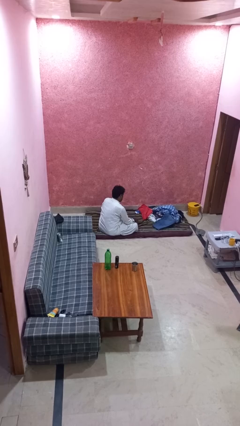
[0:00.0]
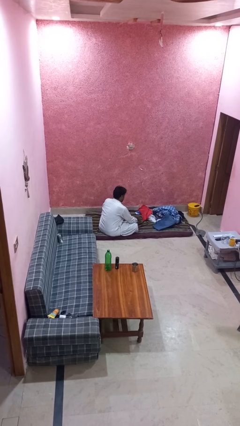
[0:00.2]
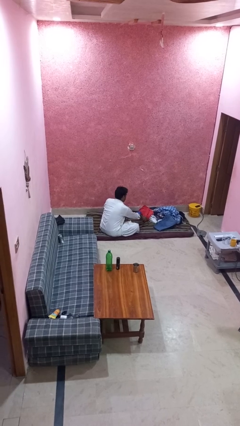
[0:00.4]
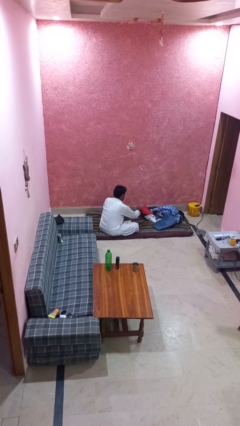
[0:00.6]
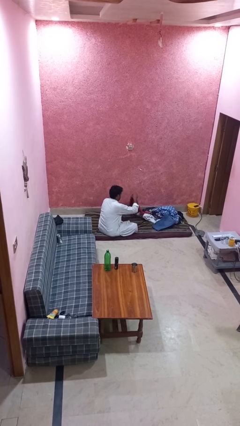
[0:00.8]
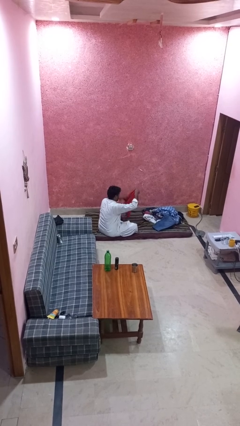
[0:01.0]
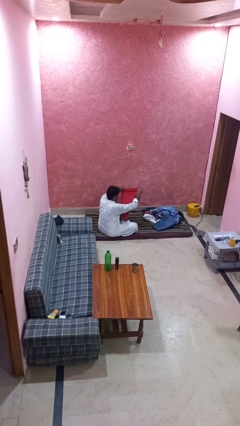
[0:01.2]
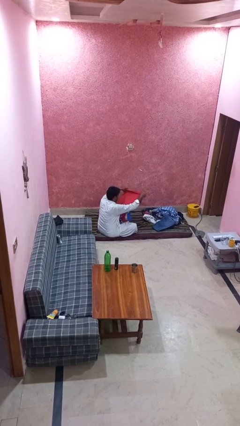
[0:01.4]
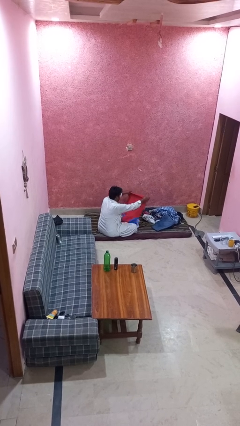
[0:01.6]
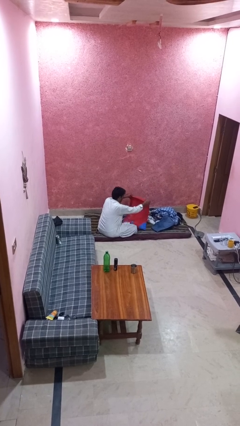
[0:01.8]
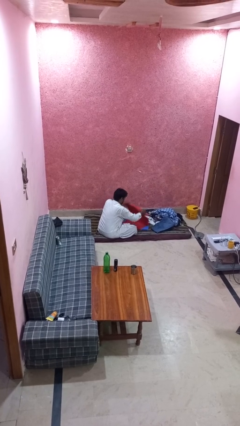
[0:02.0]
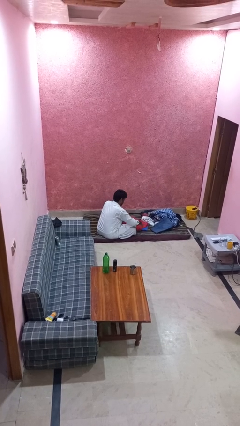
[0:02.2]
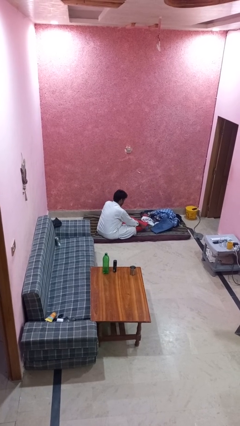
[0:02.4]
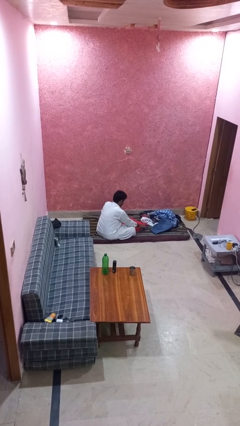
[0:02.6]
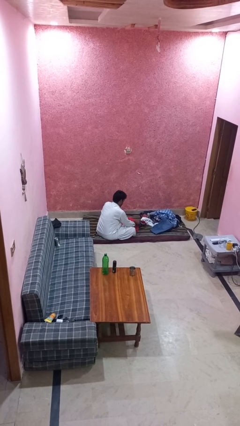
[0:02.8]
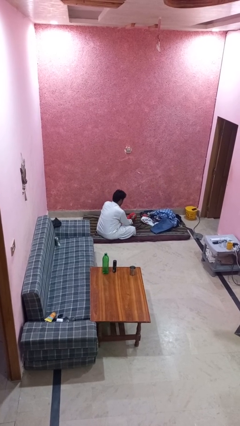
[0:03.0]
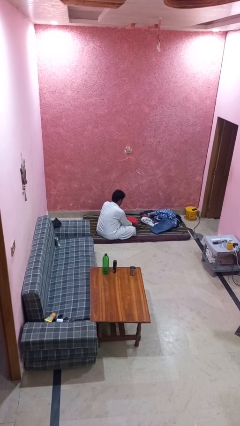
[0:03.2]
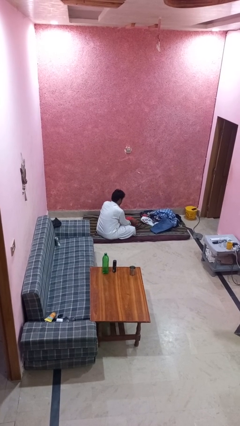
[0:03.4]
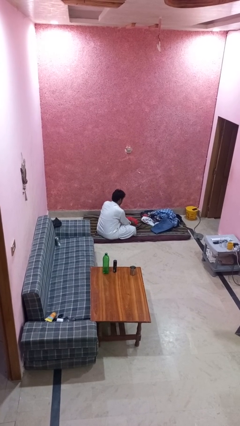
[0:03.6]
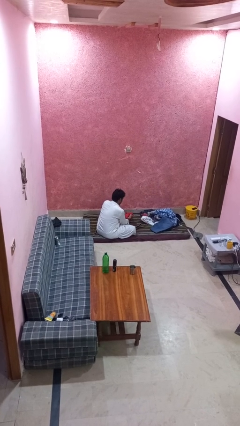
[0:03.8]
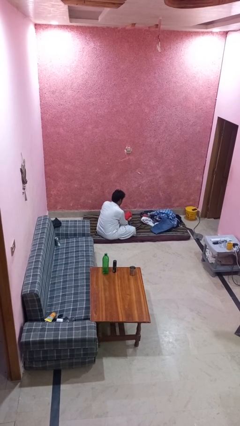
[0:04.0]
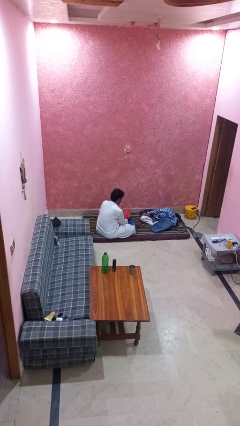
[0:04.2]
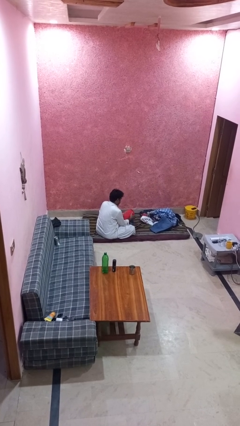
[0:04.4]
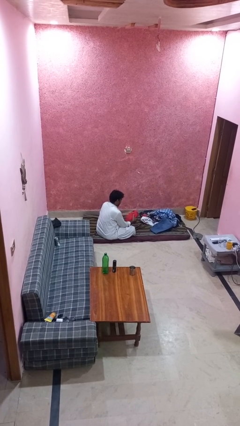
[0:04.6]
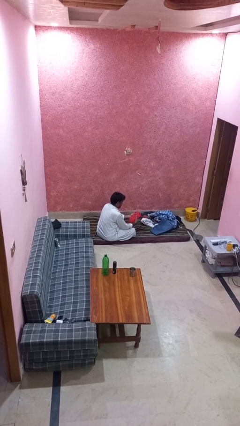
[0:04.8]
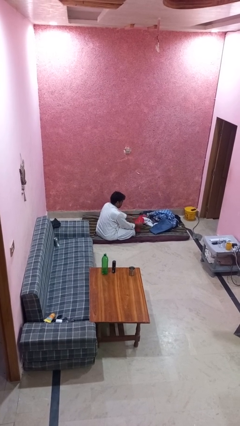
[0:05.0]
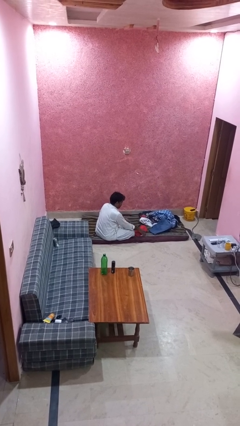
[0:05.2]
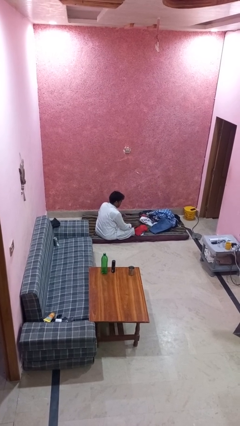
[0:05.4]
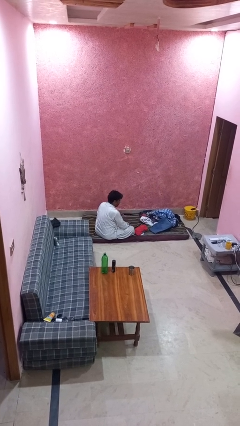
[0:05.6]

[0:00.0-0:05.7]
person folds shirt

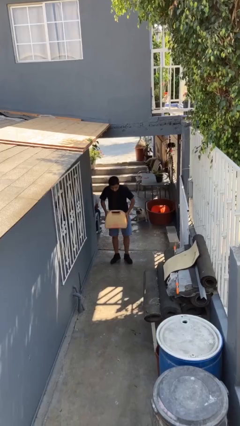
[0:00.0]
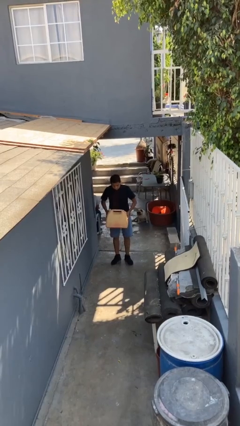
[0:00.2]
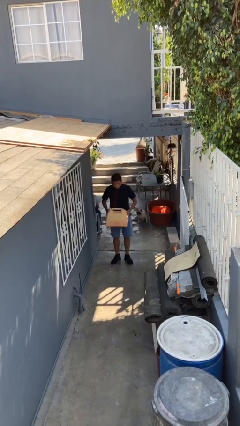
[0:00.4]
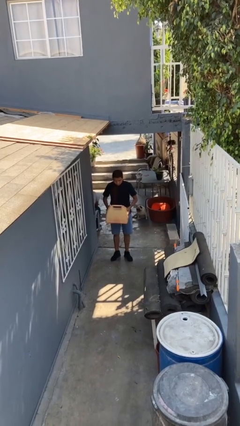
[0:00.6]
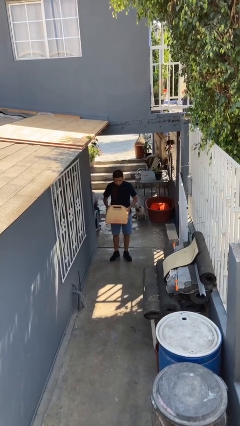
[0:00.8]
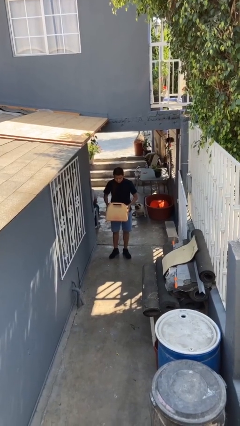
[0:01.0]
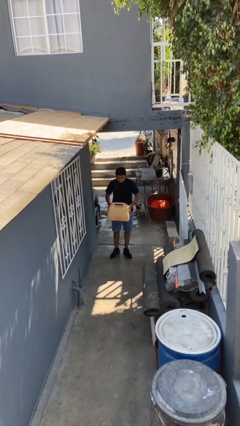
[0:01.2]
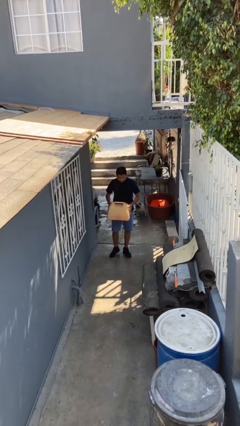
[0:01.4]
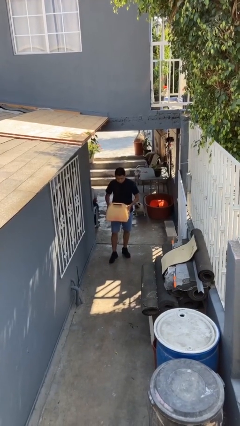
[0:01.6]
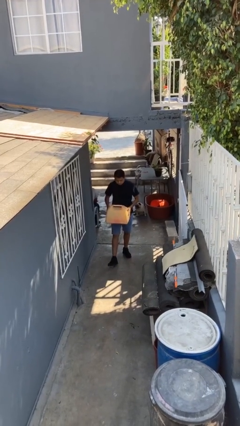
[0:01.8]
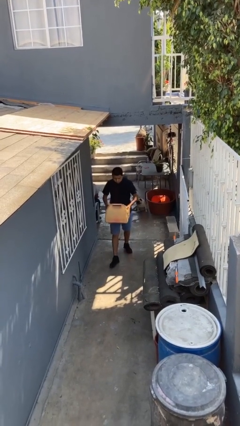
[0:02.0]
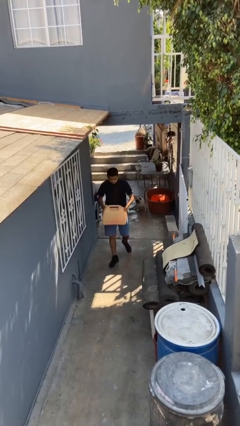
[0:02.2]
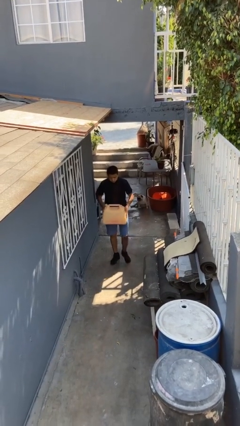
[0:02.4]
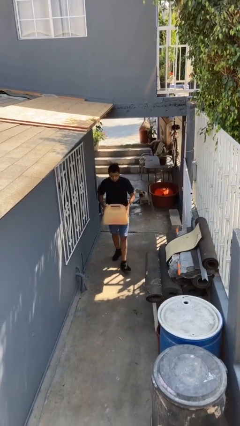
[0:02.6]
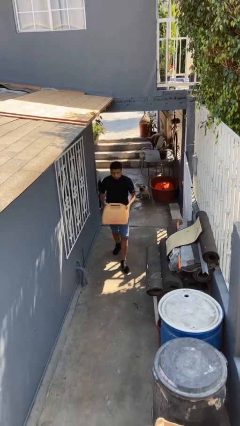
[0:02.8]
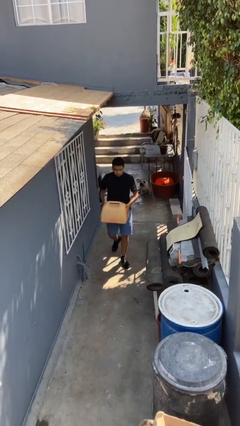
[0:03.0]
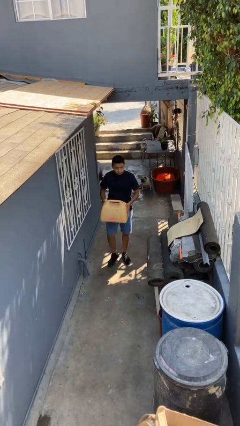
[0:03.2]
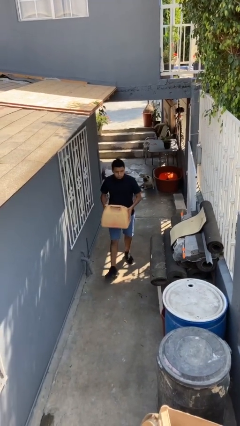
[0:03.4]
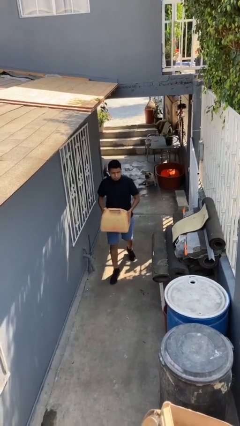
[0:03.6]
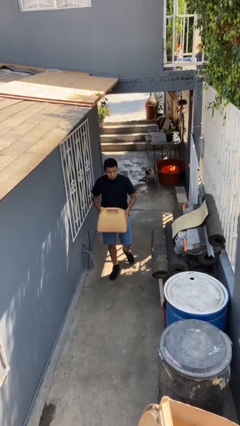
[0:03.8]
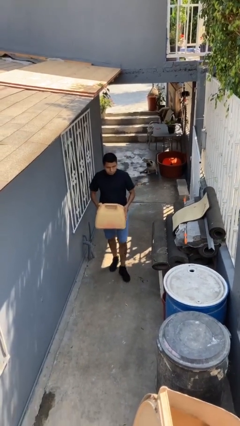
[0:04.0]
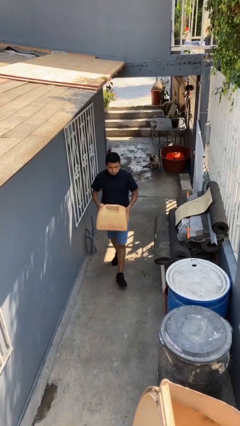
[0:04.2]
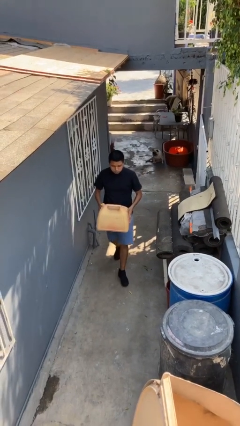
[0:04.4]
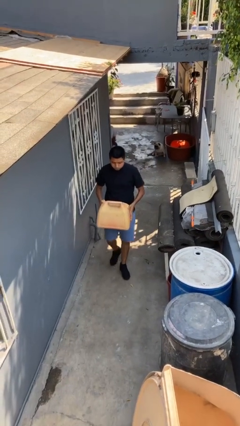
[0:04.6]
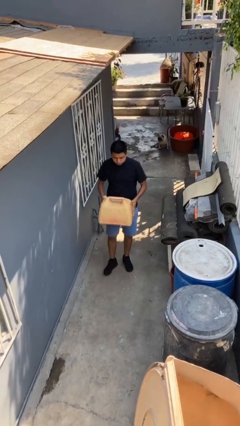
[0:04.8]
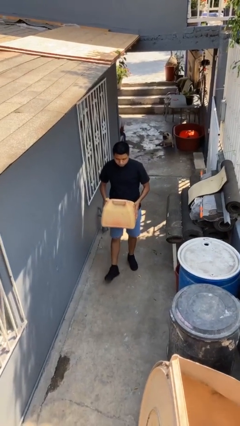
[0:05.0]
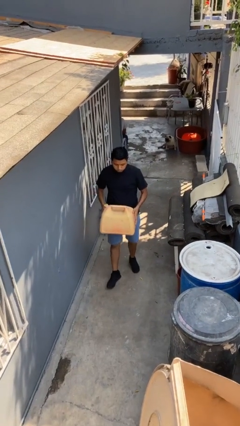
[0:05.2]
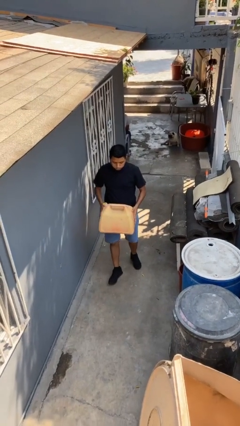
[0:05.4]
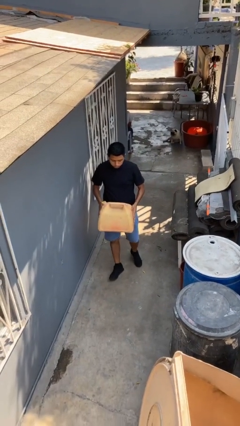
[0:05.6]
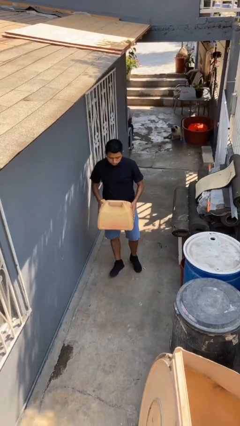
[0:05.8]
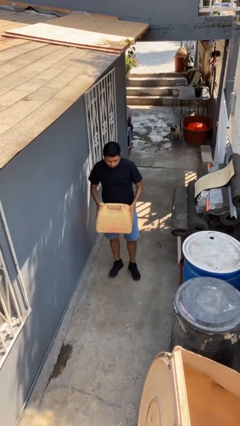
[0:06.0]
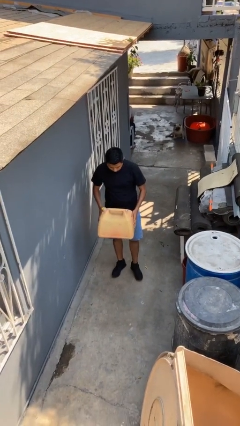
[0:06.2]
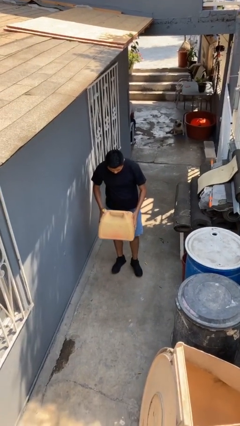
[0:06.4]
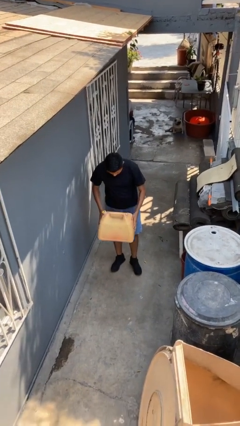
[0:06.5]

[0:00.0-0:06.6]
person carries heavy object

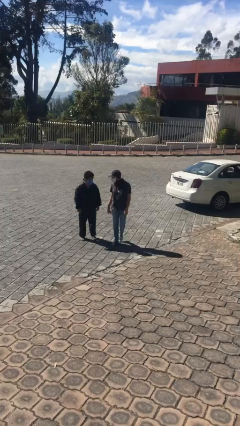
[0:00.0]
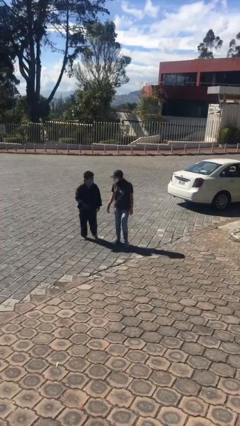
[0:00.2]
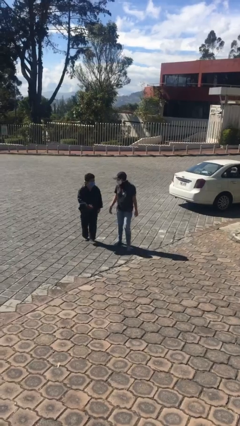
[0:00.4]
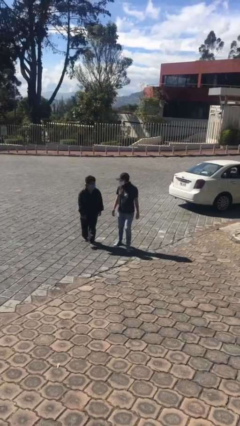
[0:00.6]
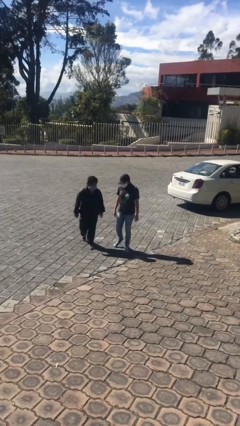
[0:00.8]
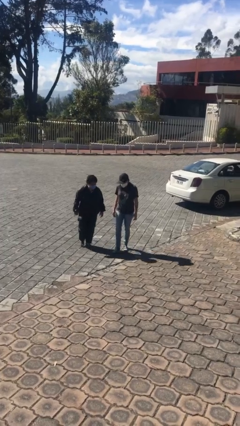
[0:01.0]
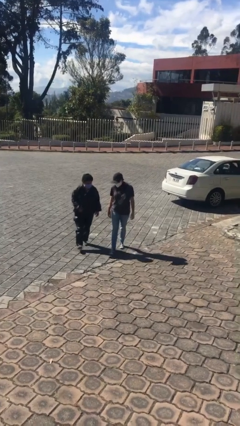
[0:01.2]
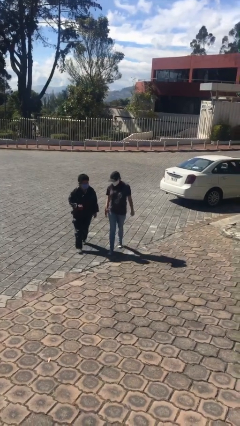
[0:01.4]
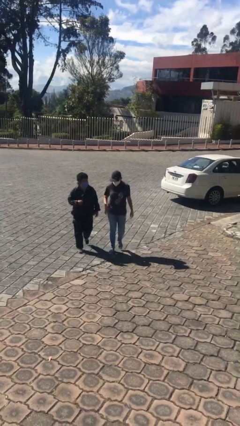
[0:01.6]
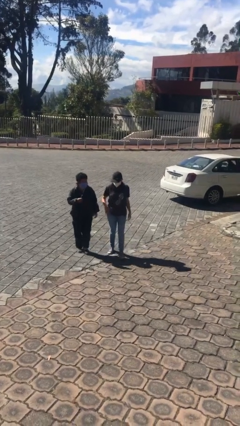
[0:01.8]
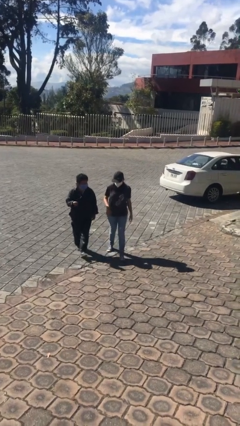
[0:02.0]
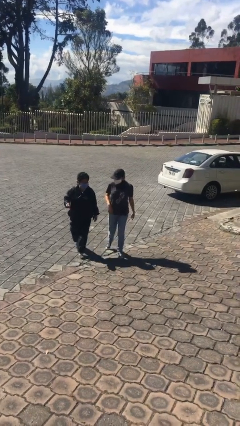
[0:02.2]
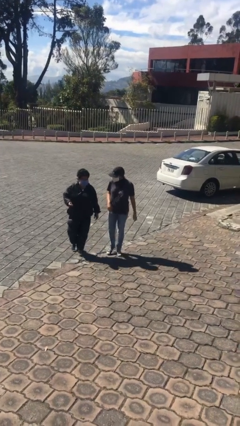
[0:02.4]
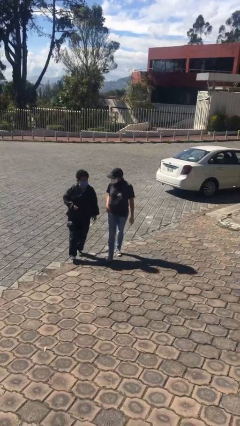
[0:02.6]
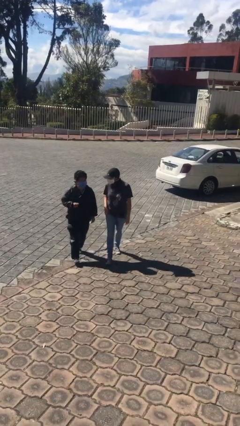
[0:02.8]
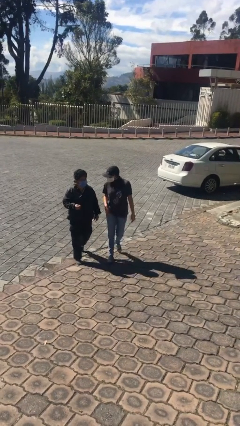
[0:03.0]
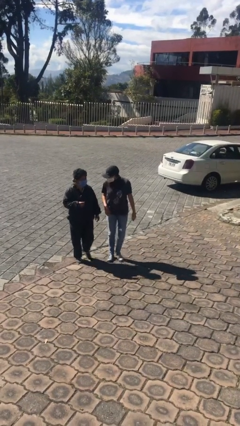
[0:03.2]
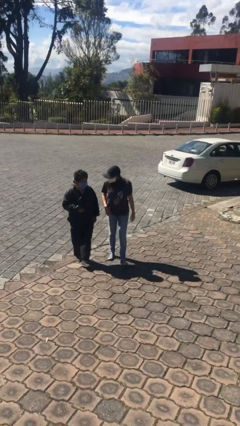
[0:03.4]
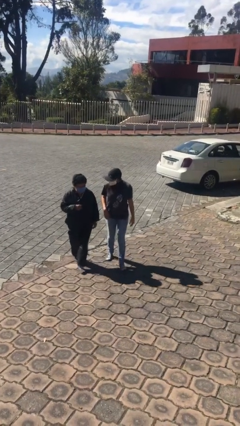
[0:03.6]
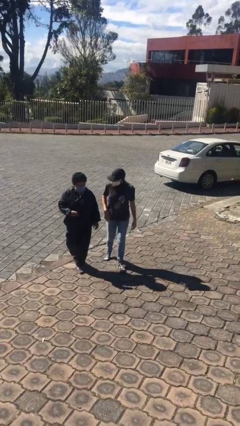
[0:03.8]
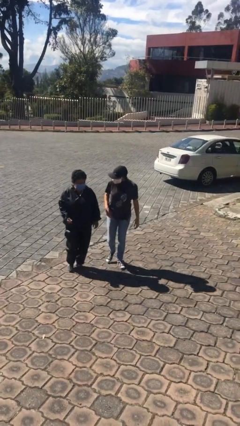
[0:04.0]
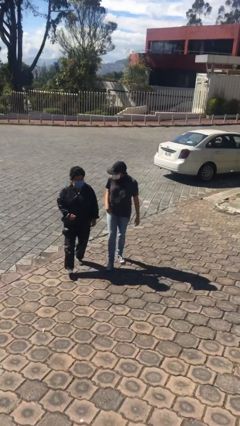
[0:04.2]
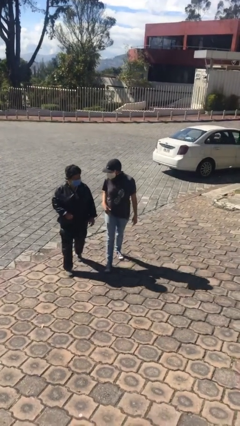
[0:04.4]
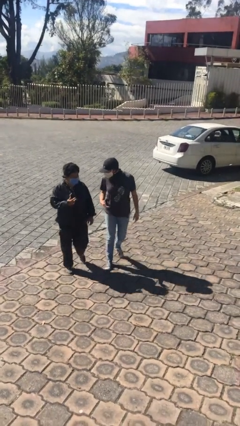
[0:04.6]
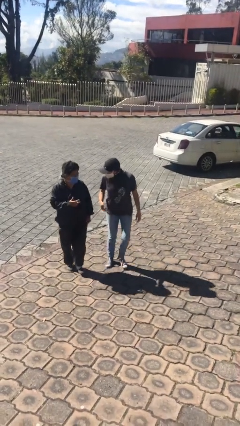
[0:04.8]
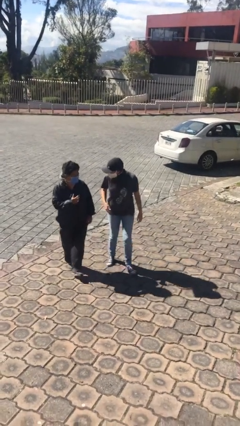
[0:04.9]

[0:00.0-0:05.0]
person talks to person

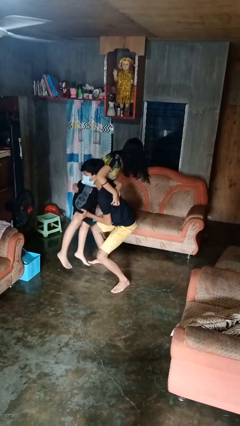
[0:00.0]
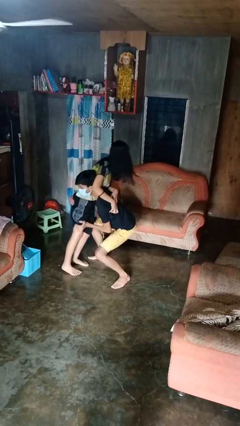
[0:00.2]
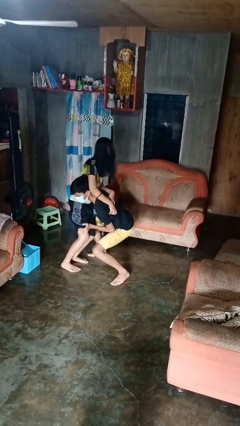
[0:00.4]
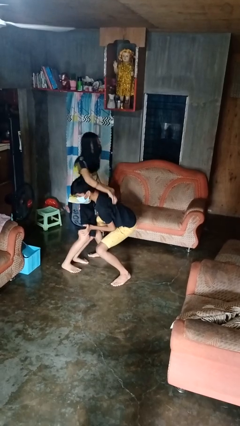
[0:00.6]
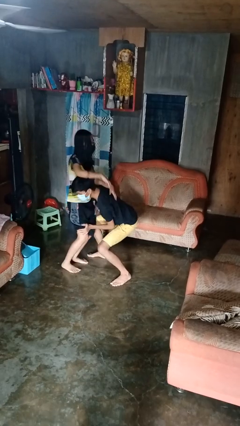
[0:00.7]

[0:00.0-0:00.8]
person puts down person
